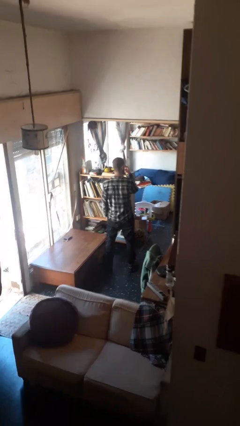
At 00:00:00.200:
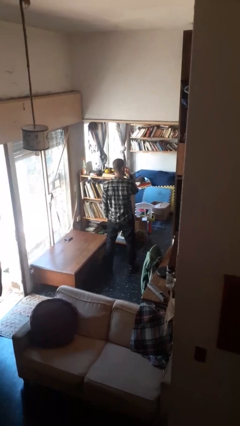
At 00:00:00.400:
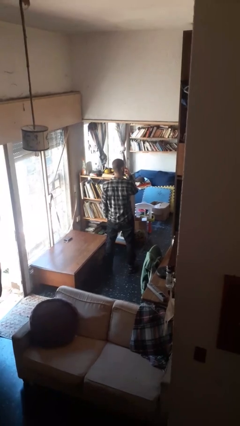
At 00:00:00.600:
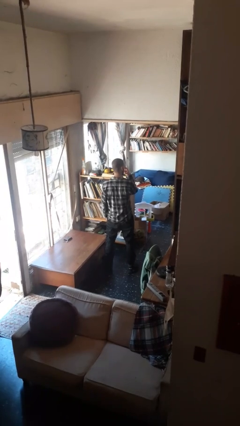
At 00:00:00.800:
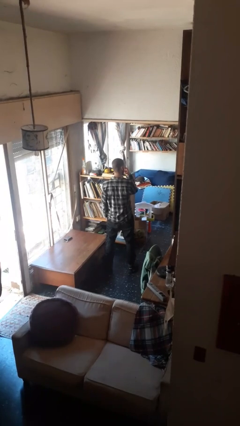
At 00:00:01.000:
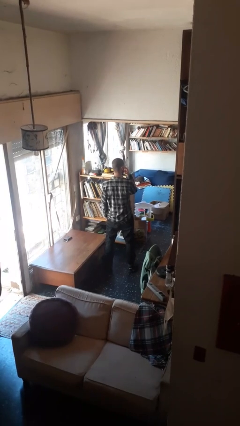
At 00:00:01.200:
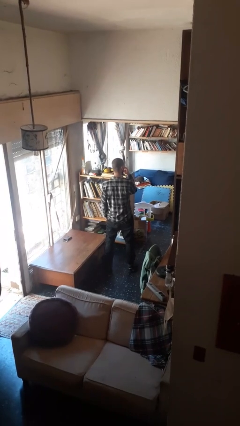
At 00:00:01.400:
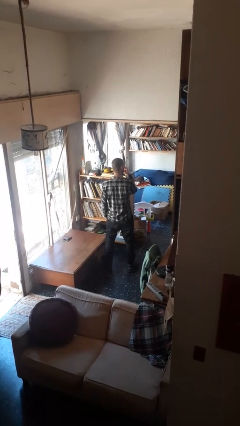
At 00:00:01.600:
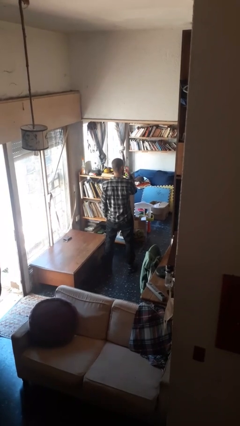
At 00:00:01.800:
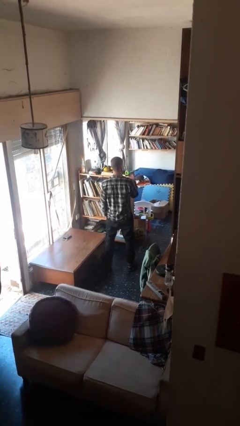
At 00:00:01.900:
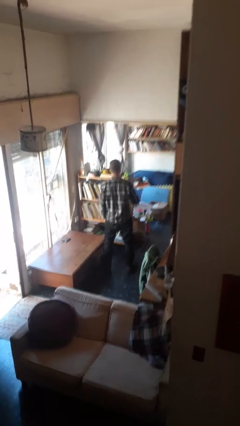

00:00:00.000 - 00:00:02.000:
person gestures watch closely

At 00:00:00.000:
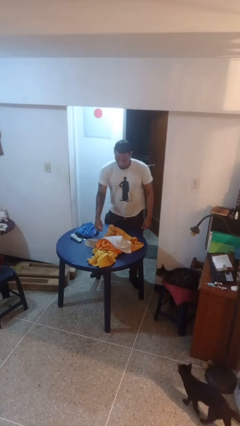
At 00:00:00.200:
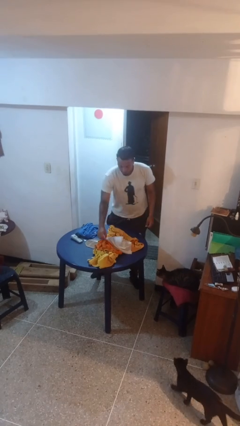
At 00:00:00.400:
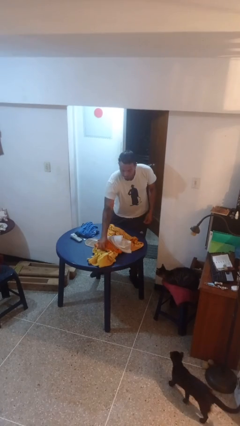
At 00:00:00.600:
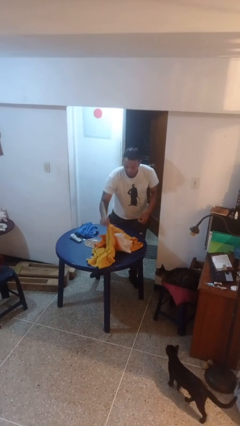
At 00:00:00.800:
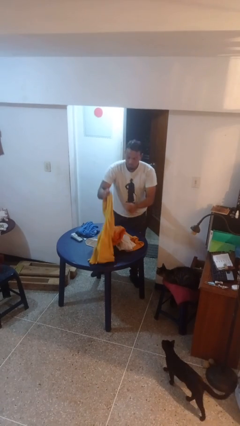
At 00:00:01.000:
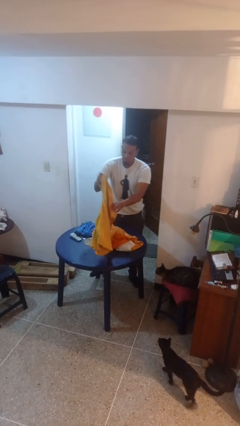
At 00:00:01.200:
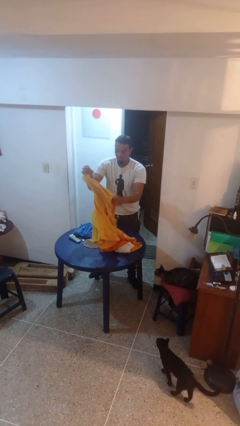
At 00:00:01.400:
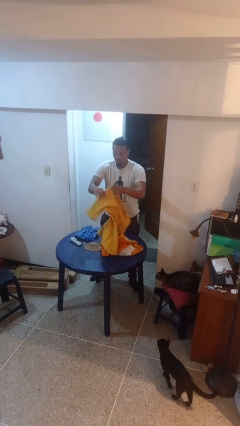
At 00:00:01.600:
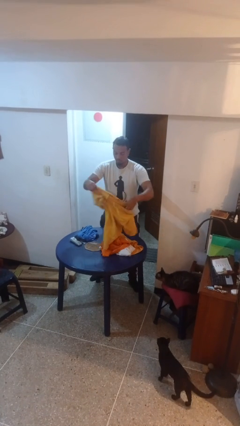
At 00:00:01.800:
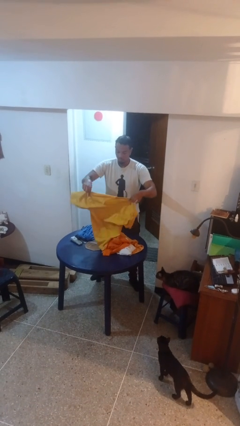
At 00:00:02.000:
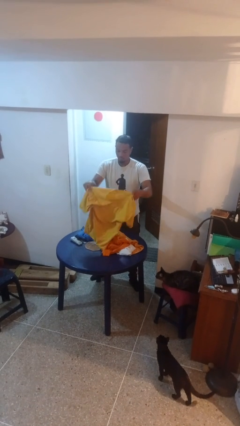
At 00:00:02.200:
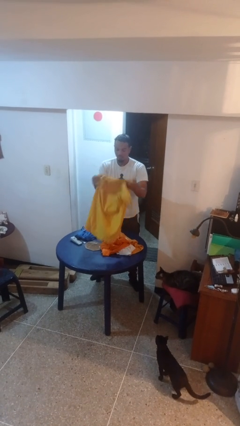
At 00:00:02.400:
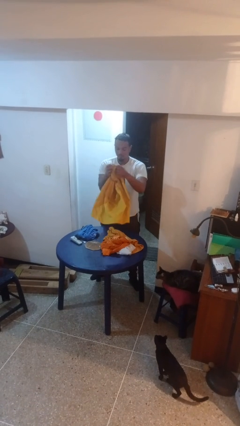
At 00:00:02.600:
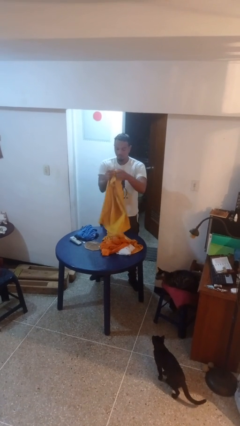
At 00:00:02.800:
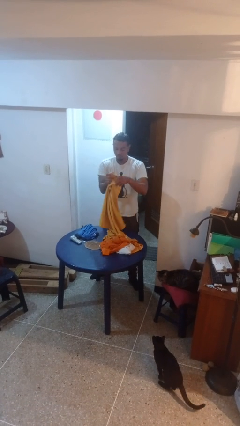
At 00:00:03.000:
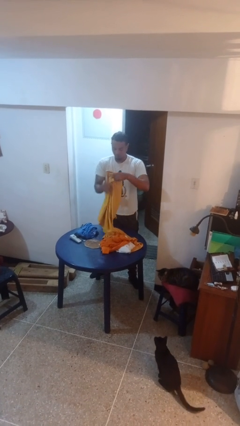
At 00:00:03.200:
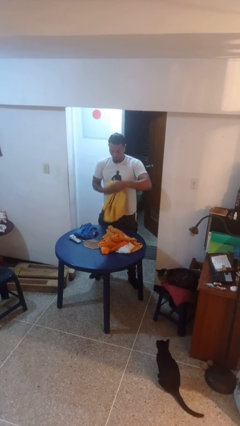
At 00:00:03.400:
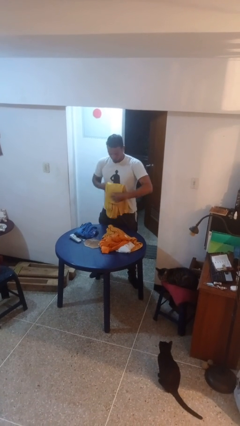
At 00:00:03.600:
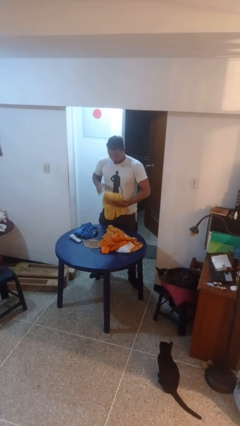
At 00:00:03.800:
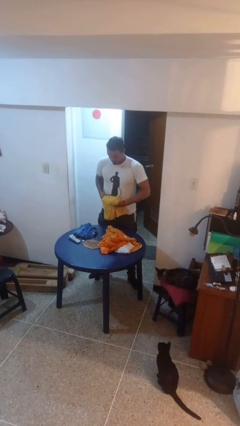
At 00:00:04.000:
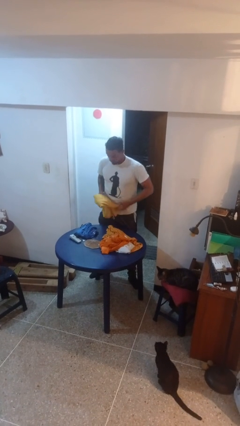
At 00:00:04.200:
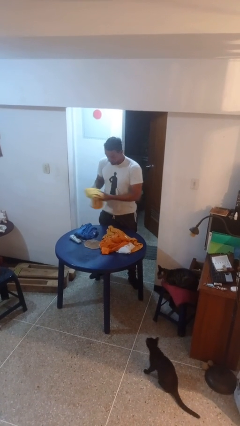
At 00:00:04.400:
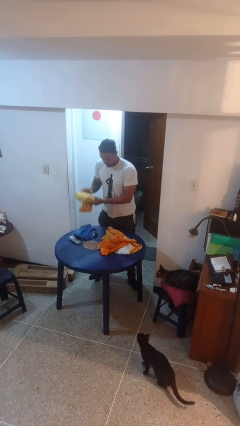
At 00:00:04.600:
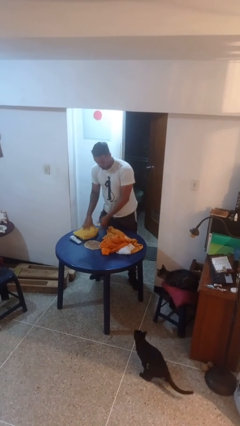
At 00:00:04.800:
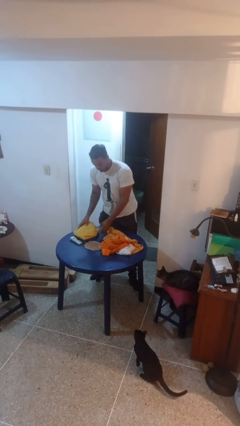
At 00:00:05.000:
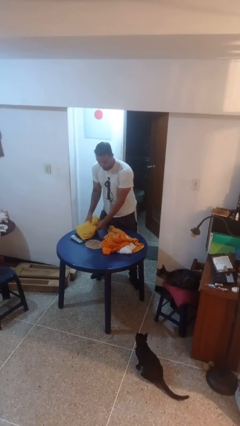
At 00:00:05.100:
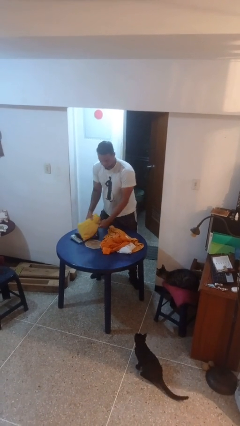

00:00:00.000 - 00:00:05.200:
person folds shirt

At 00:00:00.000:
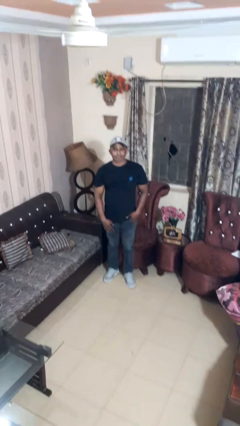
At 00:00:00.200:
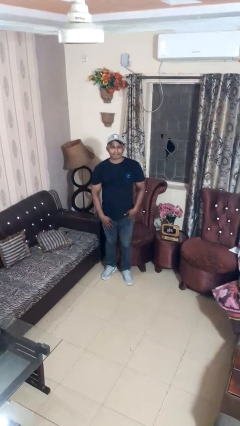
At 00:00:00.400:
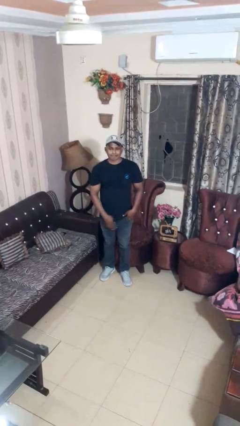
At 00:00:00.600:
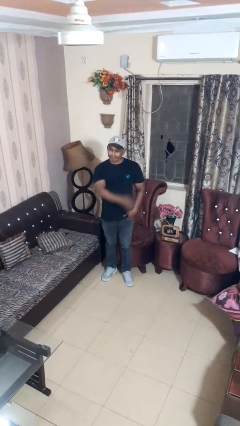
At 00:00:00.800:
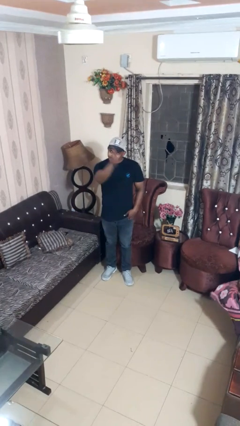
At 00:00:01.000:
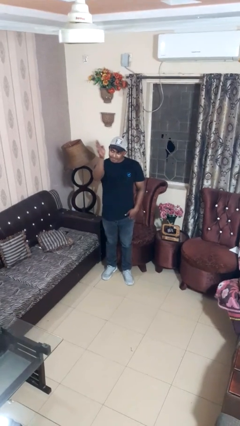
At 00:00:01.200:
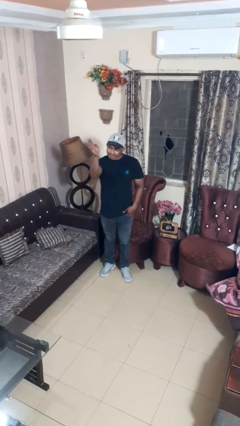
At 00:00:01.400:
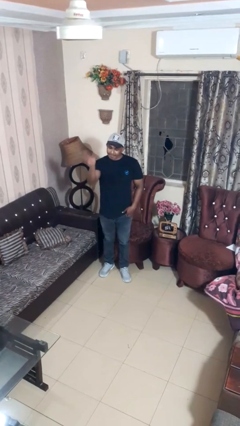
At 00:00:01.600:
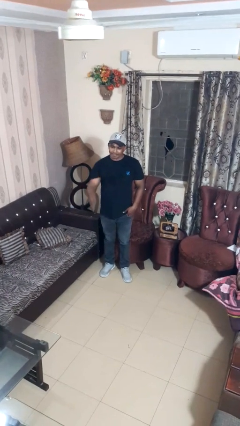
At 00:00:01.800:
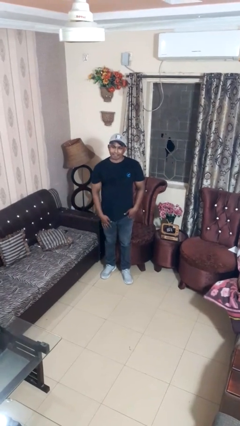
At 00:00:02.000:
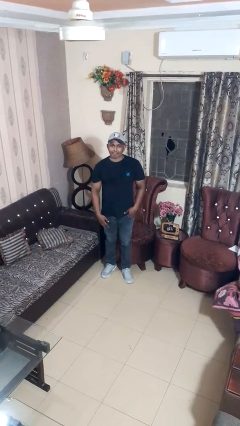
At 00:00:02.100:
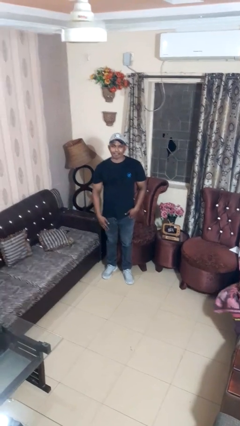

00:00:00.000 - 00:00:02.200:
person gestures swipe left

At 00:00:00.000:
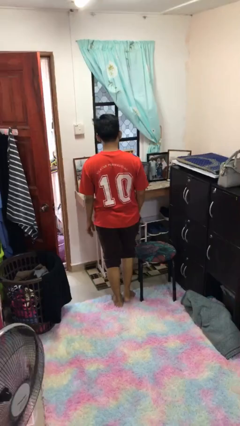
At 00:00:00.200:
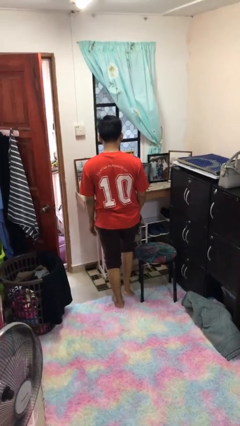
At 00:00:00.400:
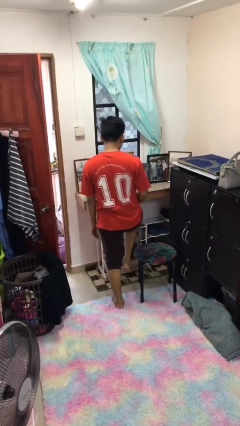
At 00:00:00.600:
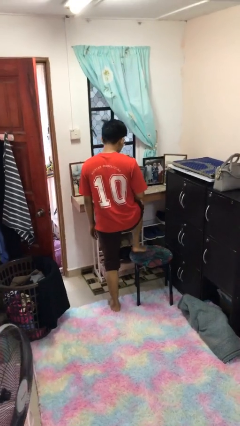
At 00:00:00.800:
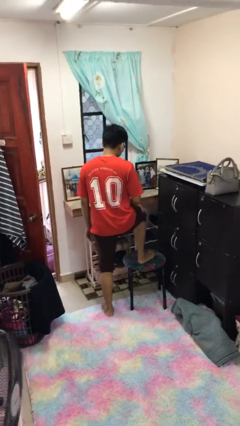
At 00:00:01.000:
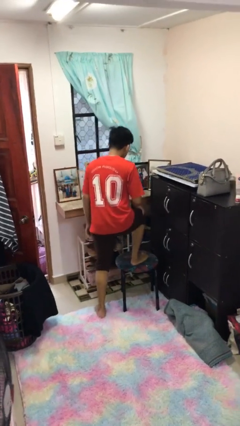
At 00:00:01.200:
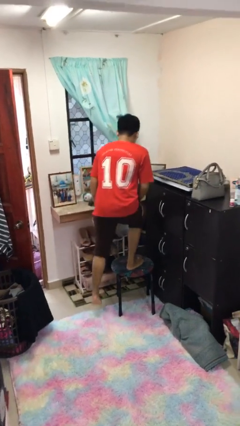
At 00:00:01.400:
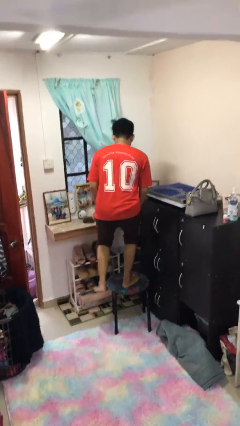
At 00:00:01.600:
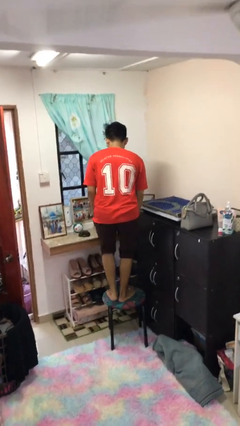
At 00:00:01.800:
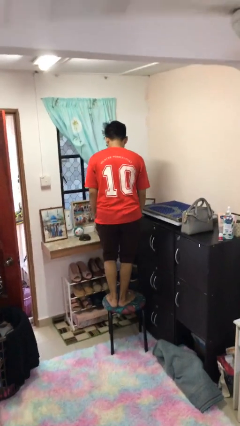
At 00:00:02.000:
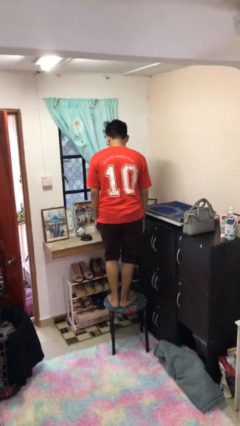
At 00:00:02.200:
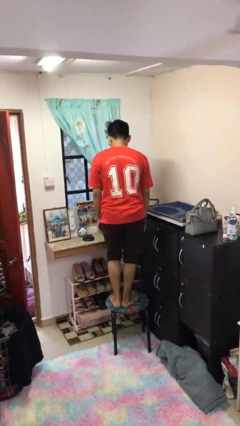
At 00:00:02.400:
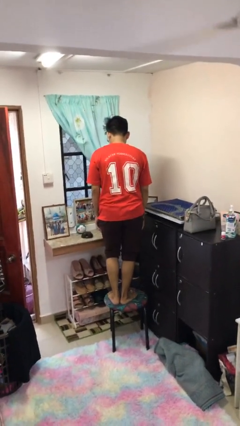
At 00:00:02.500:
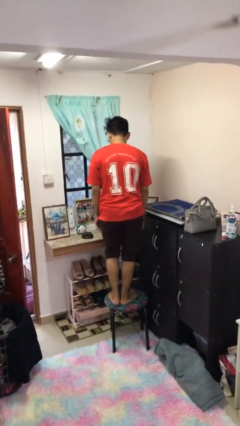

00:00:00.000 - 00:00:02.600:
person climbs on chair

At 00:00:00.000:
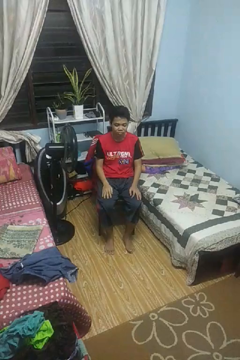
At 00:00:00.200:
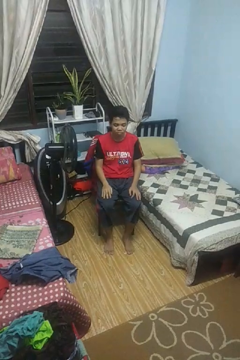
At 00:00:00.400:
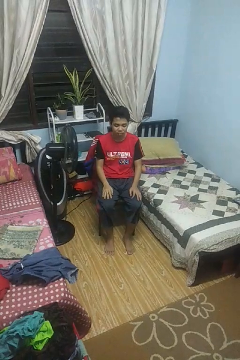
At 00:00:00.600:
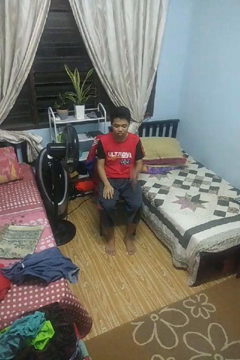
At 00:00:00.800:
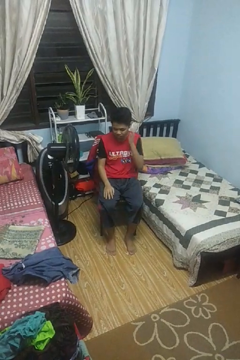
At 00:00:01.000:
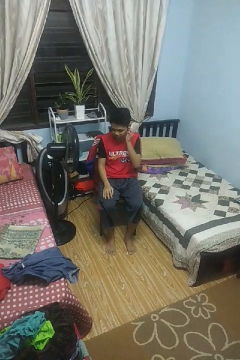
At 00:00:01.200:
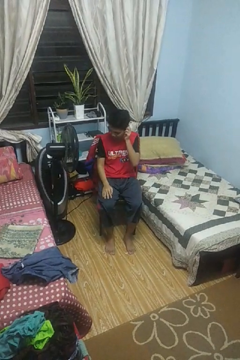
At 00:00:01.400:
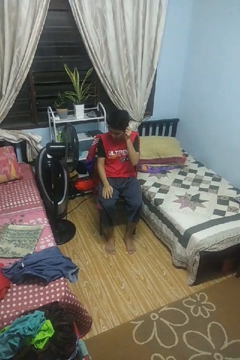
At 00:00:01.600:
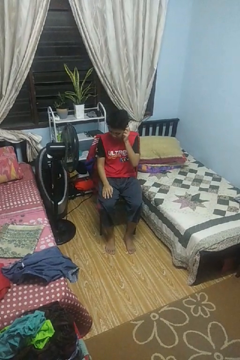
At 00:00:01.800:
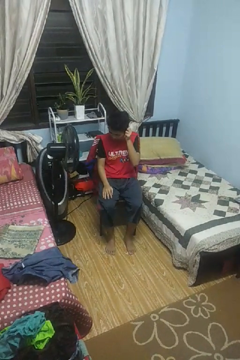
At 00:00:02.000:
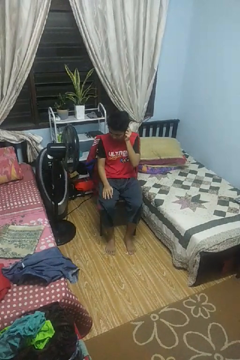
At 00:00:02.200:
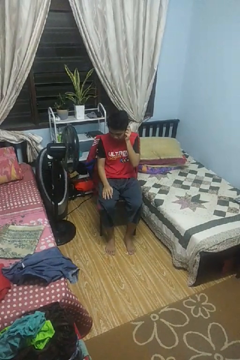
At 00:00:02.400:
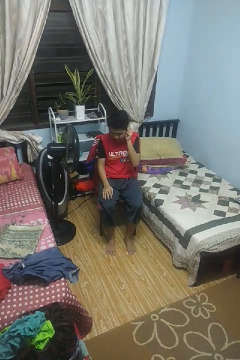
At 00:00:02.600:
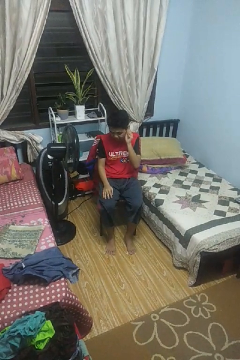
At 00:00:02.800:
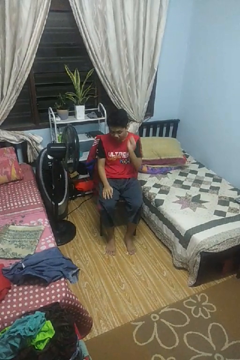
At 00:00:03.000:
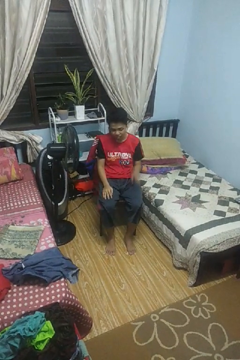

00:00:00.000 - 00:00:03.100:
person touches earlobe

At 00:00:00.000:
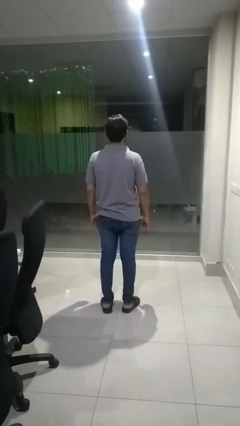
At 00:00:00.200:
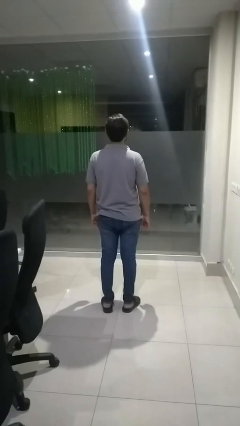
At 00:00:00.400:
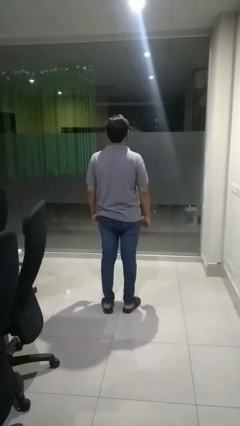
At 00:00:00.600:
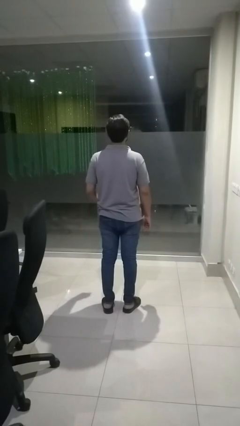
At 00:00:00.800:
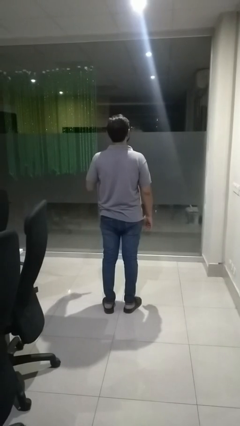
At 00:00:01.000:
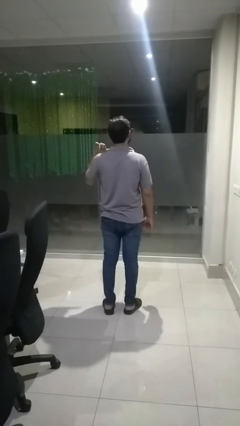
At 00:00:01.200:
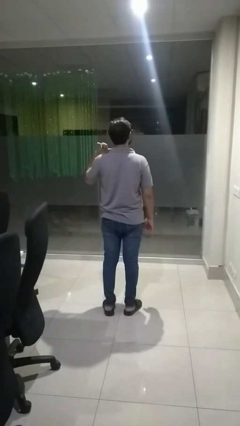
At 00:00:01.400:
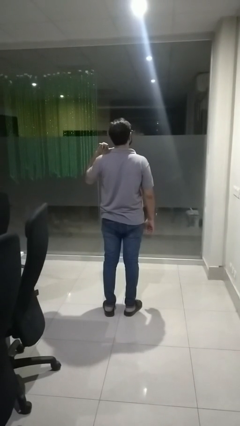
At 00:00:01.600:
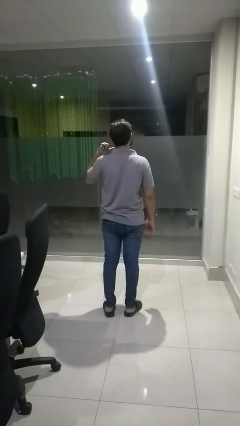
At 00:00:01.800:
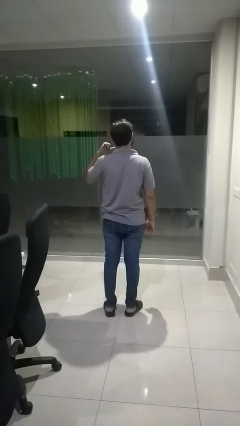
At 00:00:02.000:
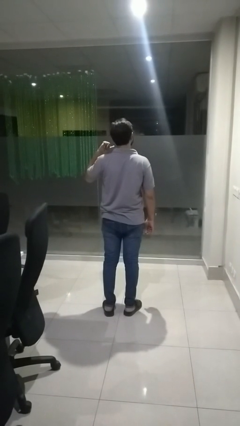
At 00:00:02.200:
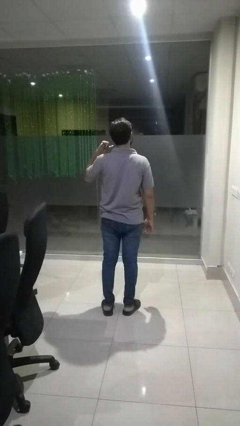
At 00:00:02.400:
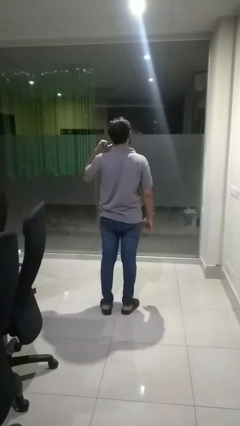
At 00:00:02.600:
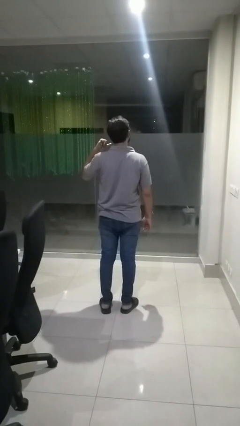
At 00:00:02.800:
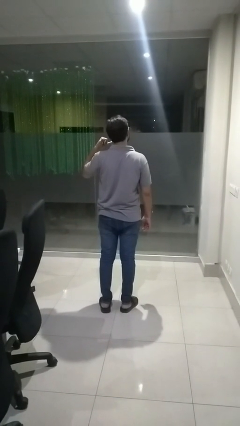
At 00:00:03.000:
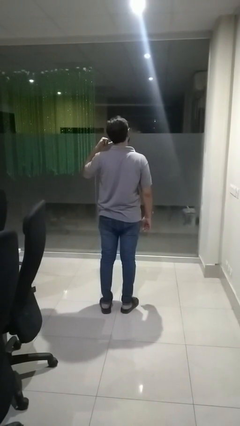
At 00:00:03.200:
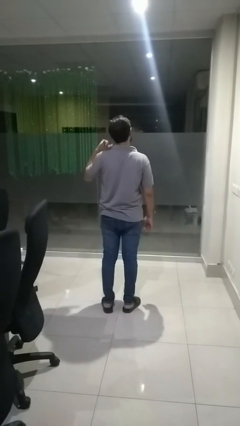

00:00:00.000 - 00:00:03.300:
person gestures call me
